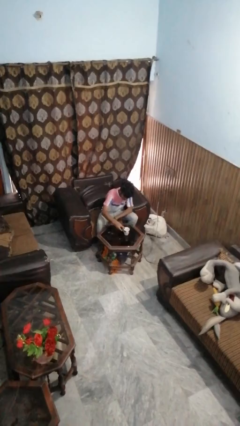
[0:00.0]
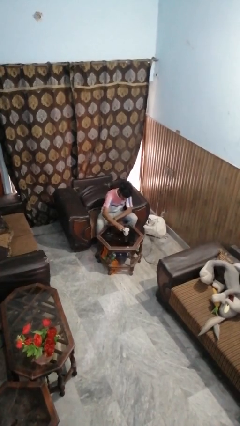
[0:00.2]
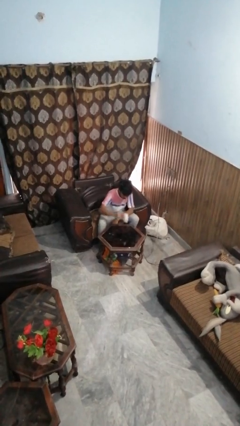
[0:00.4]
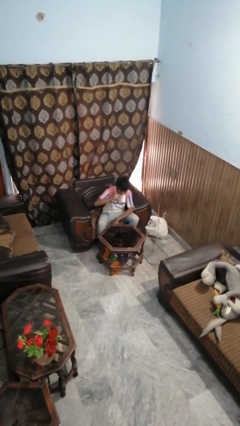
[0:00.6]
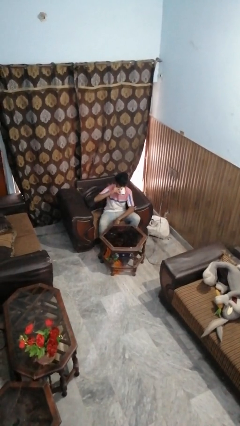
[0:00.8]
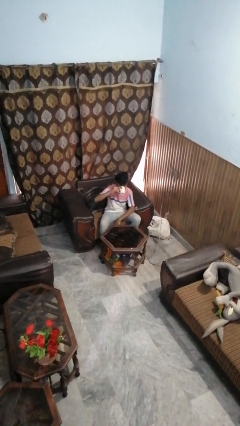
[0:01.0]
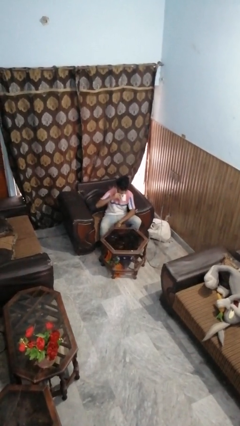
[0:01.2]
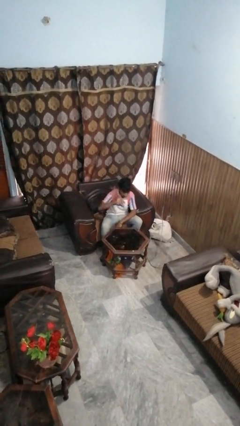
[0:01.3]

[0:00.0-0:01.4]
person drinks from mug

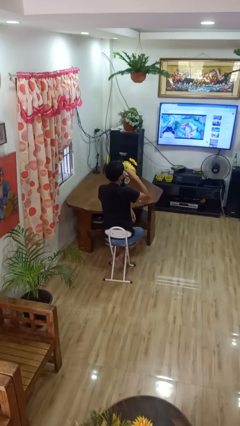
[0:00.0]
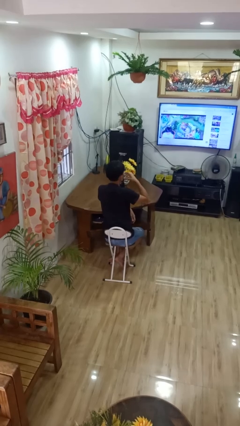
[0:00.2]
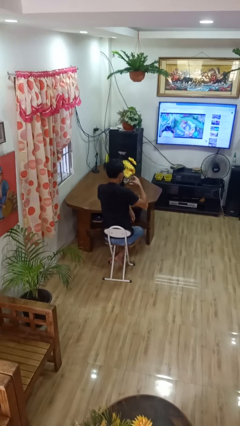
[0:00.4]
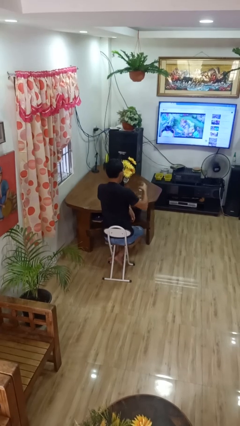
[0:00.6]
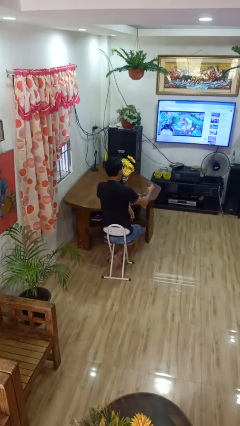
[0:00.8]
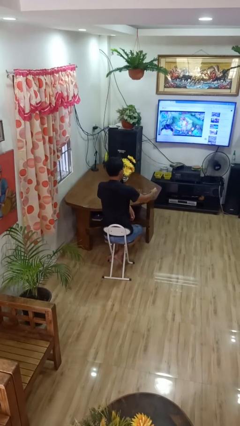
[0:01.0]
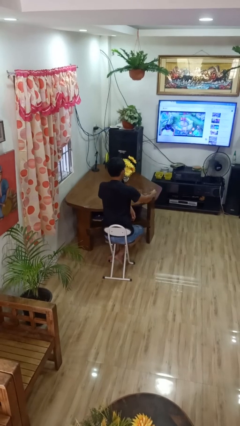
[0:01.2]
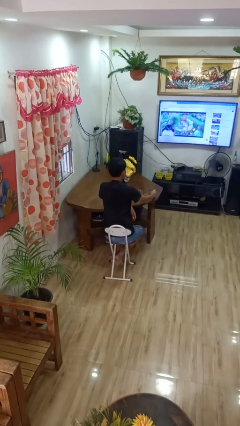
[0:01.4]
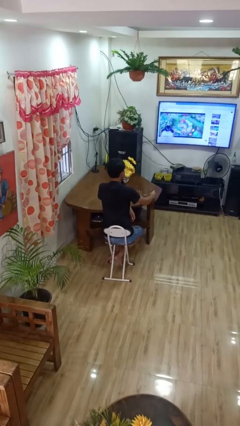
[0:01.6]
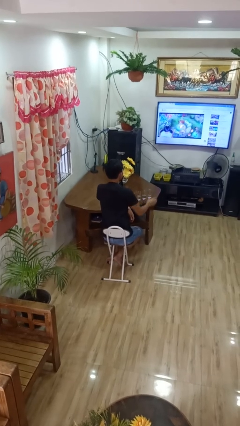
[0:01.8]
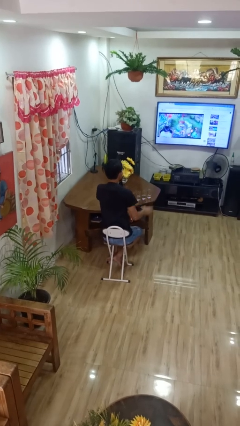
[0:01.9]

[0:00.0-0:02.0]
person puts down object on table

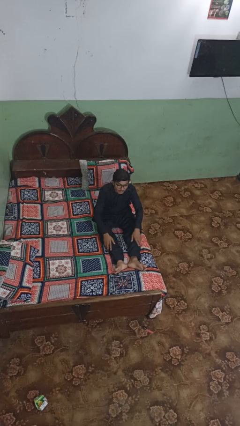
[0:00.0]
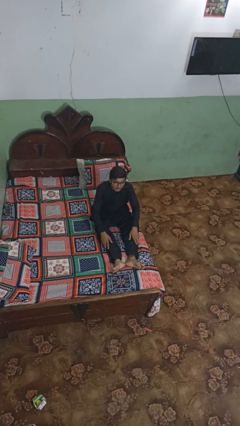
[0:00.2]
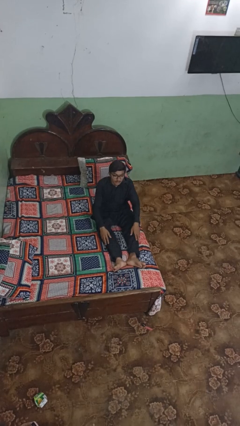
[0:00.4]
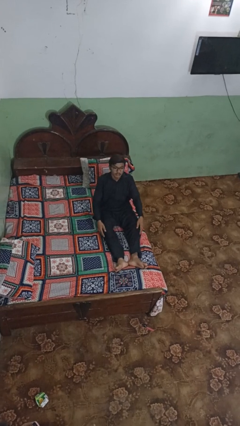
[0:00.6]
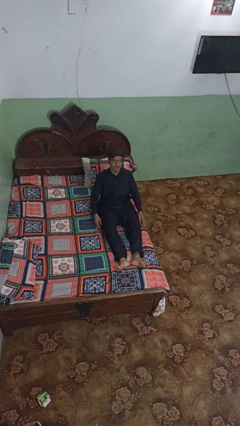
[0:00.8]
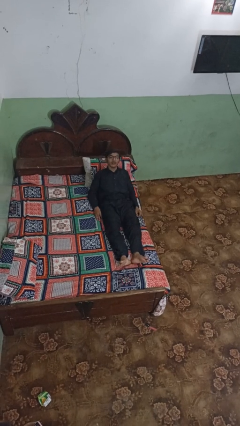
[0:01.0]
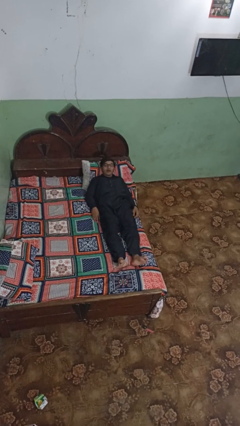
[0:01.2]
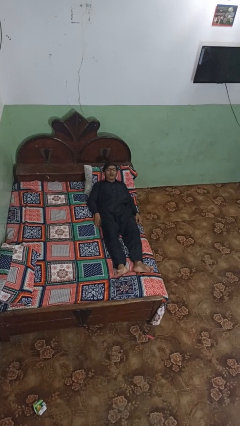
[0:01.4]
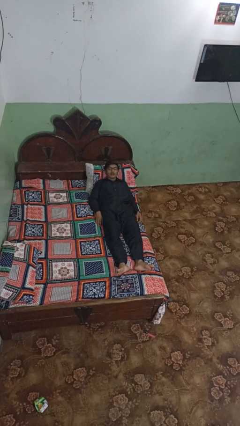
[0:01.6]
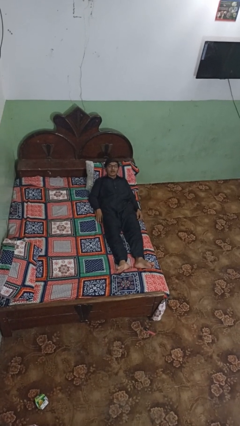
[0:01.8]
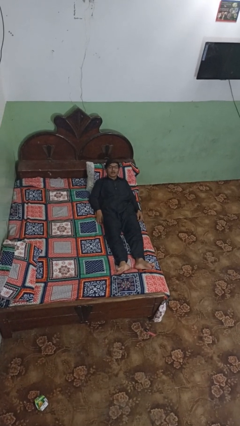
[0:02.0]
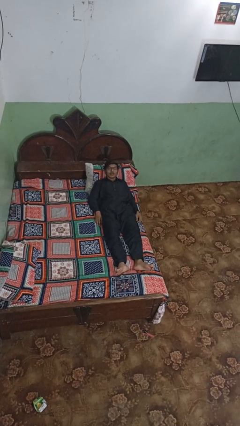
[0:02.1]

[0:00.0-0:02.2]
person lies down on bed

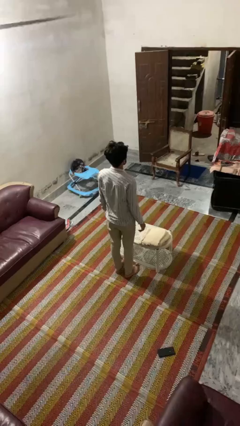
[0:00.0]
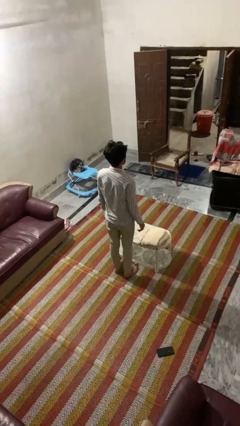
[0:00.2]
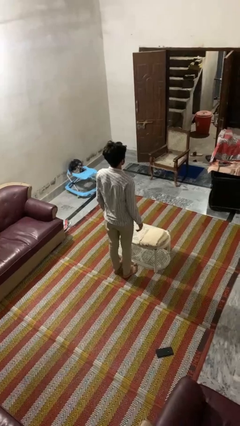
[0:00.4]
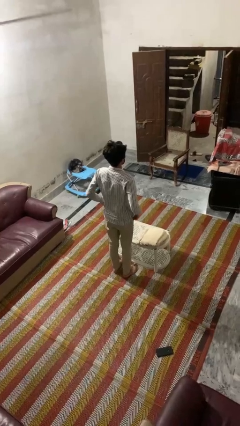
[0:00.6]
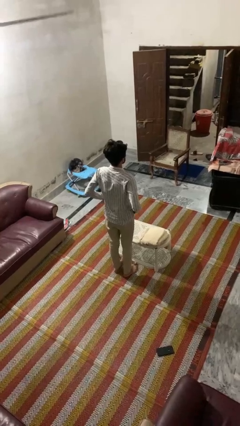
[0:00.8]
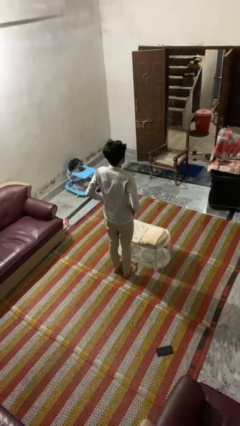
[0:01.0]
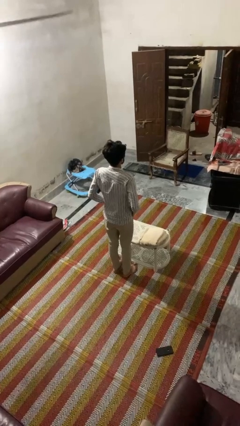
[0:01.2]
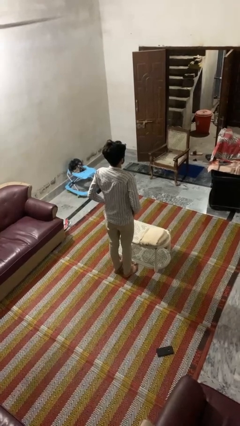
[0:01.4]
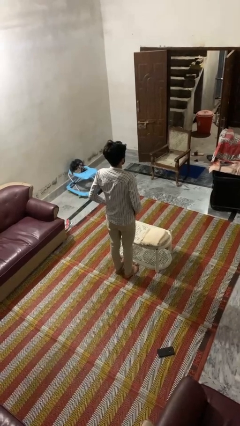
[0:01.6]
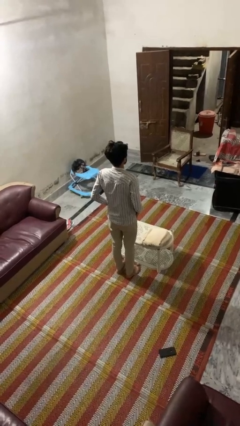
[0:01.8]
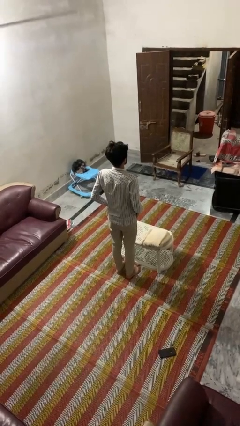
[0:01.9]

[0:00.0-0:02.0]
person puts hands in back pockets

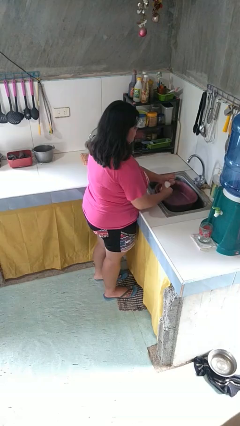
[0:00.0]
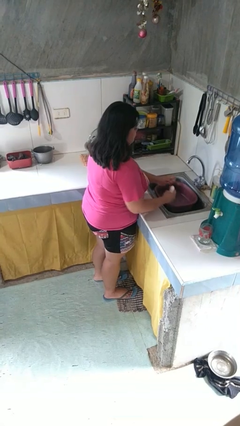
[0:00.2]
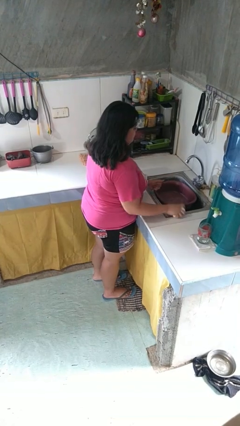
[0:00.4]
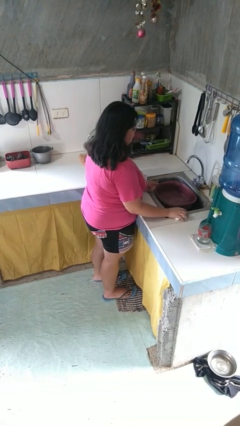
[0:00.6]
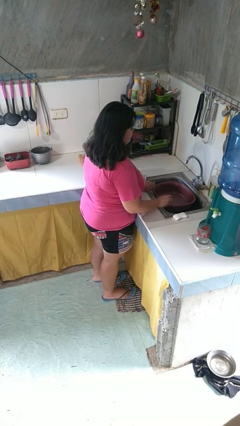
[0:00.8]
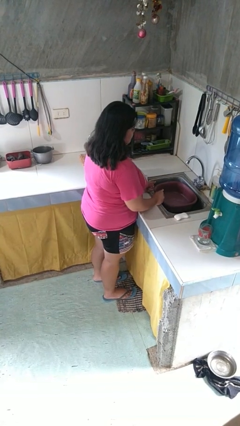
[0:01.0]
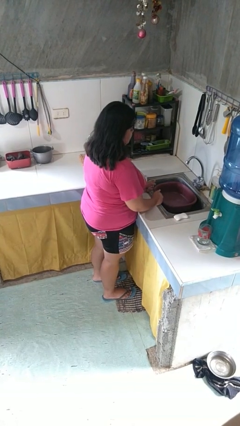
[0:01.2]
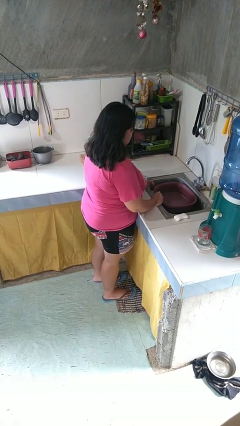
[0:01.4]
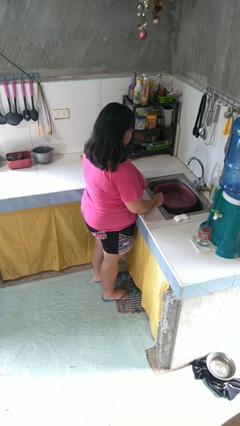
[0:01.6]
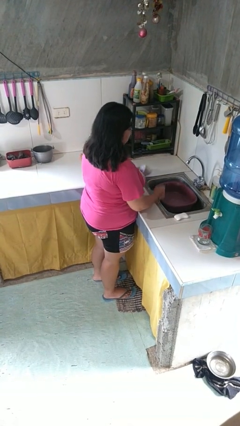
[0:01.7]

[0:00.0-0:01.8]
person dries hands with towel

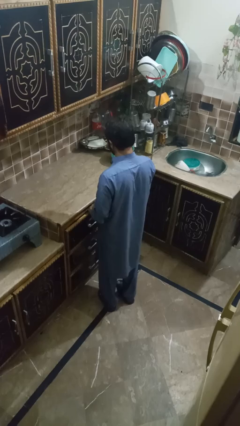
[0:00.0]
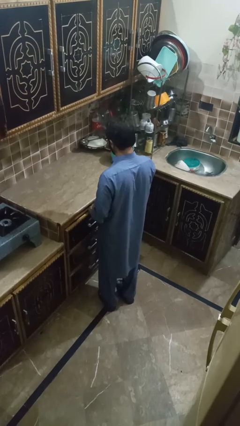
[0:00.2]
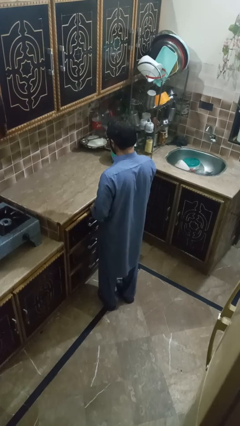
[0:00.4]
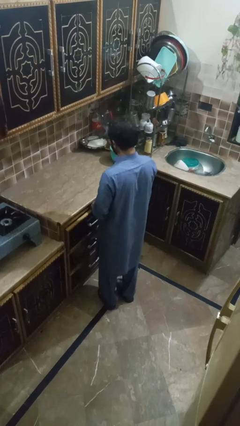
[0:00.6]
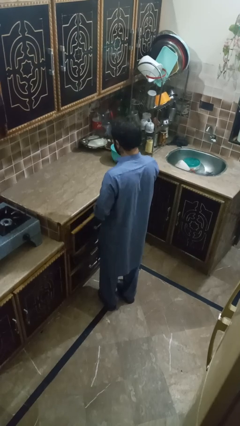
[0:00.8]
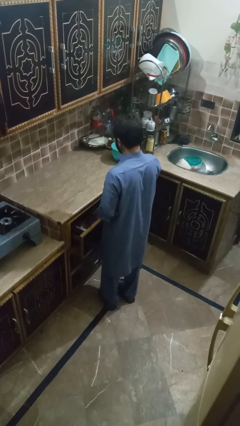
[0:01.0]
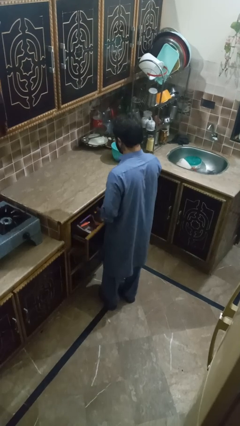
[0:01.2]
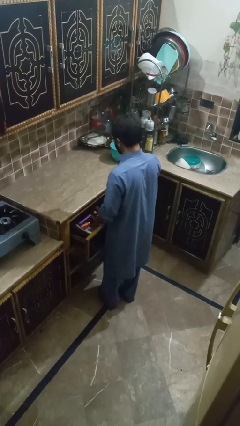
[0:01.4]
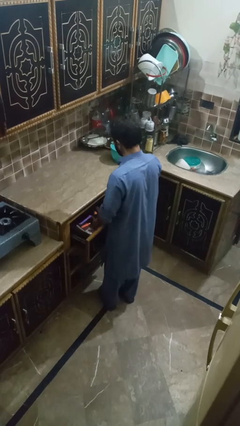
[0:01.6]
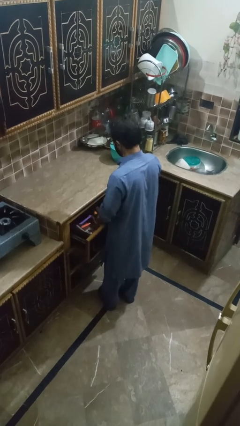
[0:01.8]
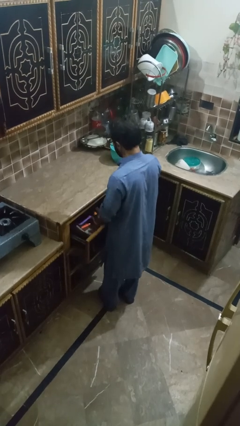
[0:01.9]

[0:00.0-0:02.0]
person searches in kitchen drawer

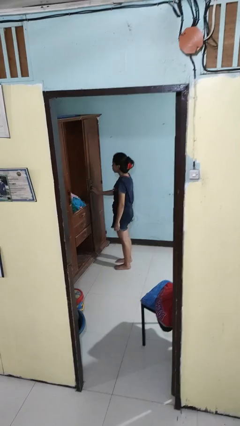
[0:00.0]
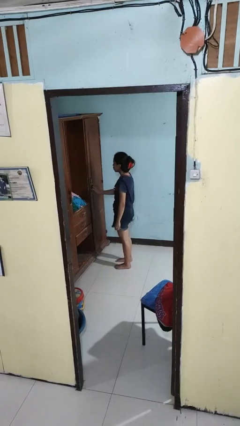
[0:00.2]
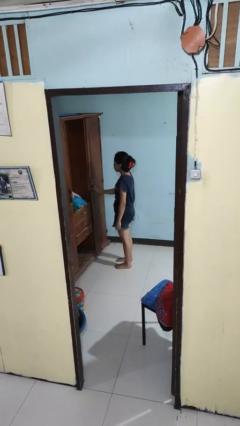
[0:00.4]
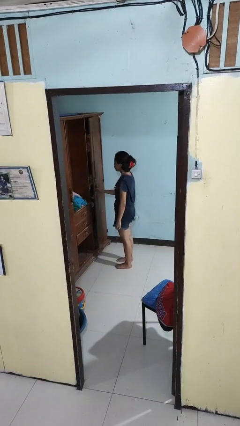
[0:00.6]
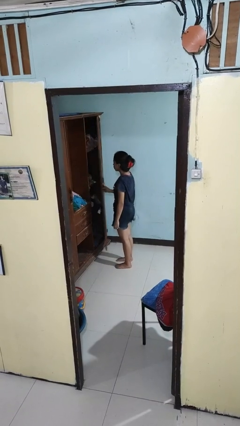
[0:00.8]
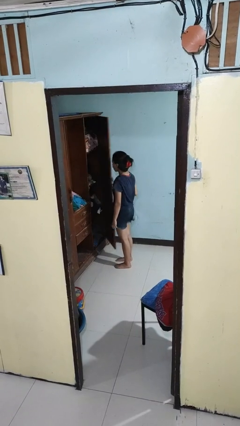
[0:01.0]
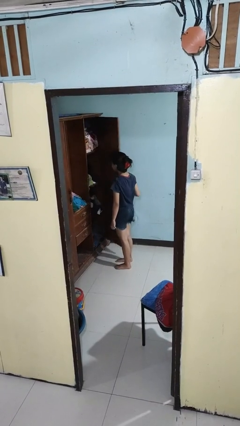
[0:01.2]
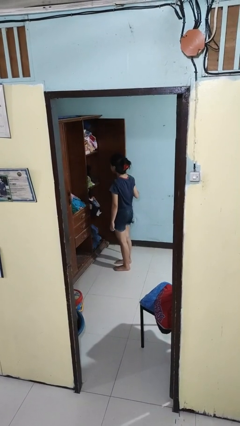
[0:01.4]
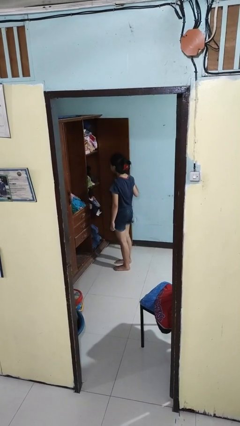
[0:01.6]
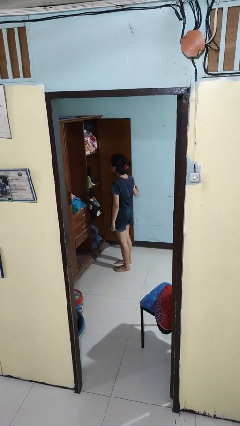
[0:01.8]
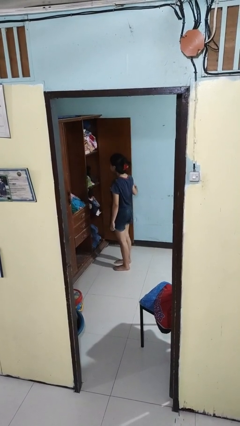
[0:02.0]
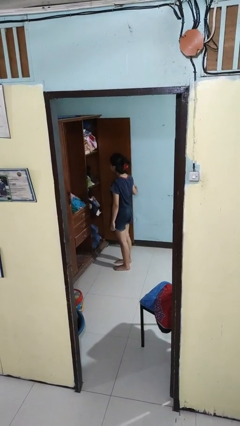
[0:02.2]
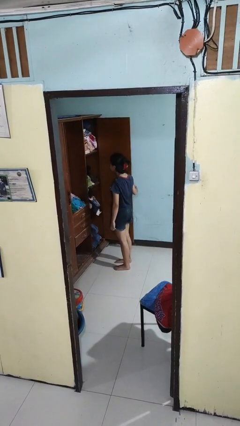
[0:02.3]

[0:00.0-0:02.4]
person opens closet door

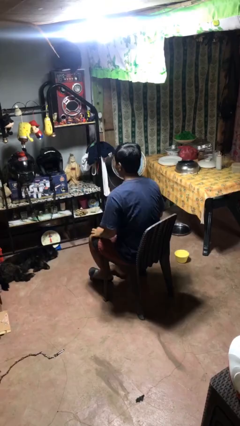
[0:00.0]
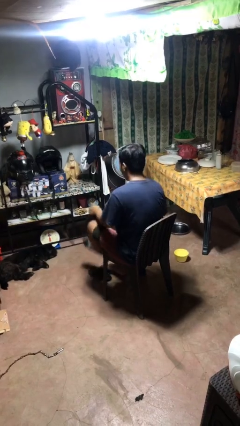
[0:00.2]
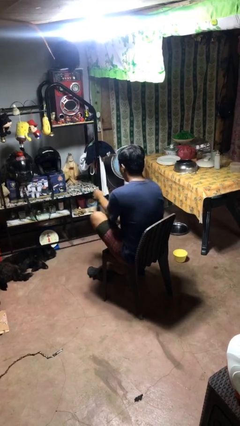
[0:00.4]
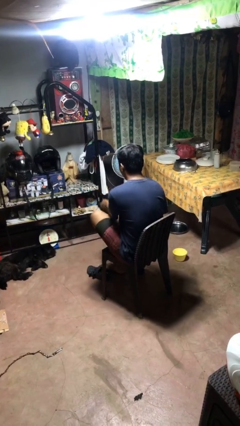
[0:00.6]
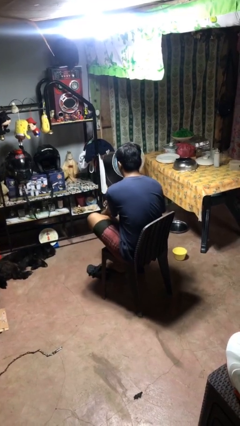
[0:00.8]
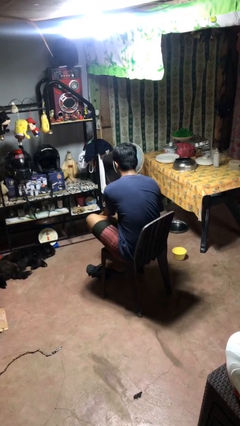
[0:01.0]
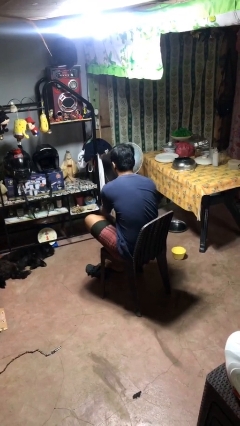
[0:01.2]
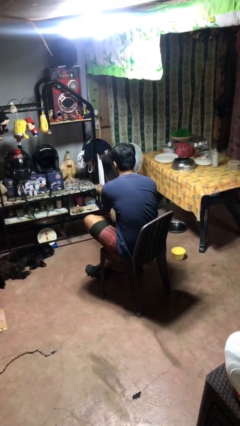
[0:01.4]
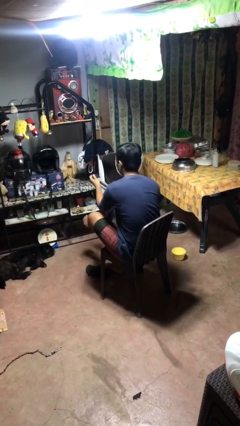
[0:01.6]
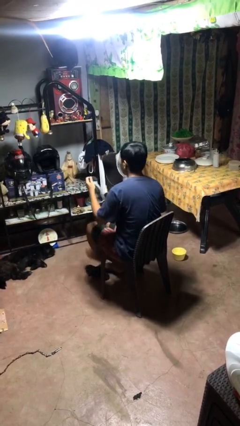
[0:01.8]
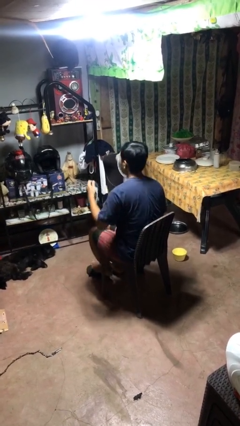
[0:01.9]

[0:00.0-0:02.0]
person takes off socks

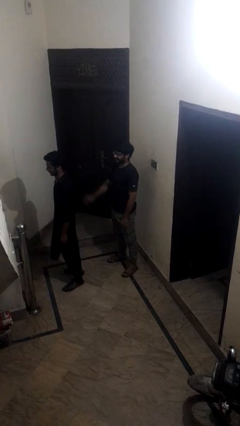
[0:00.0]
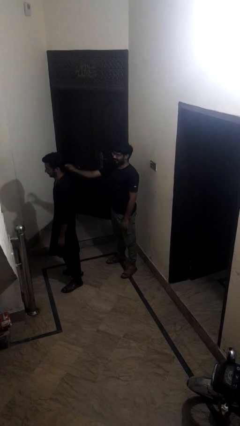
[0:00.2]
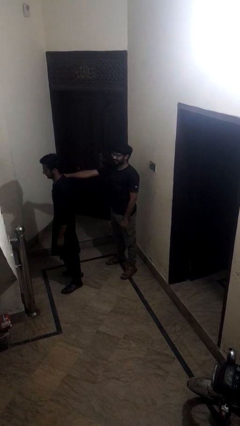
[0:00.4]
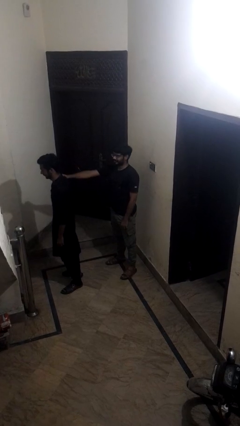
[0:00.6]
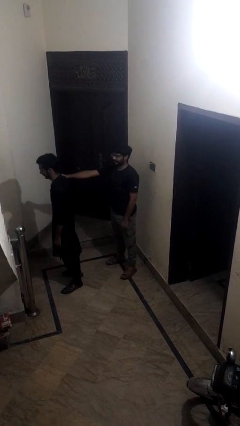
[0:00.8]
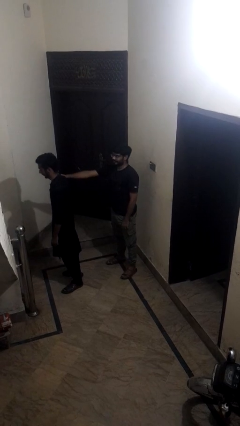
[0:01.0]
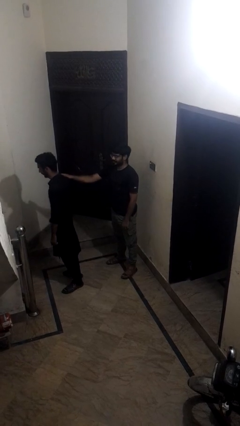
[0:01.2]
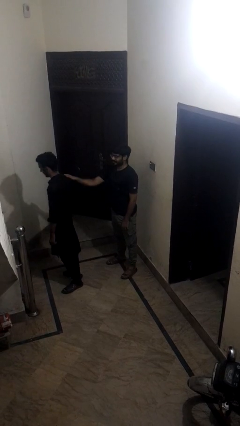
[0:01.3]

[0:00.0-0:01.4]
person grabs person by shoulder
